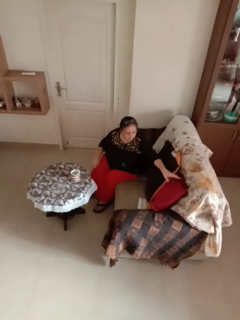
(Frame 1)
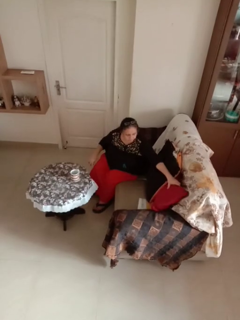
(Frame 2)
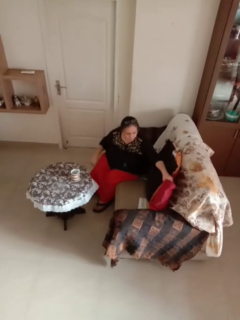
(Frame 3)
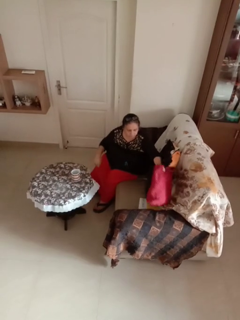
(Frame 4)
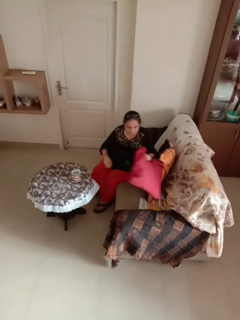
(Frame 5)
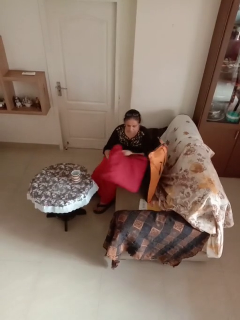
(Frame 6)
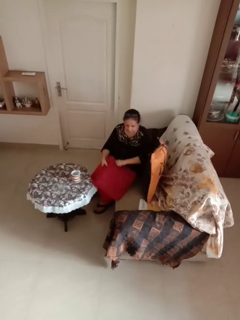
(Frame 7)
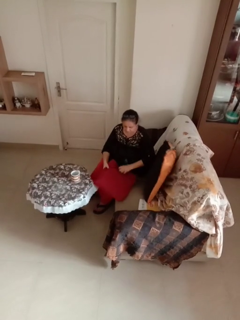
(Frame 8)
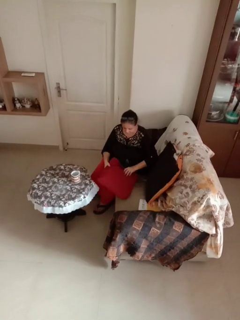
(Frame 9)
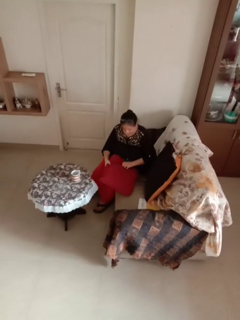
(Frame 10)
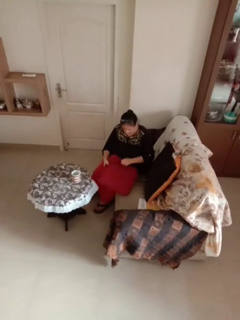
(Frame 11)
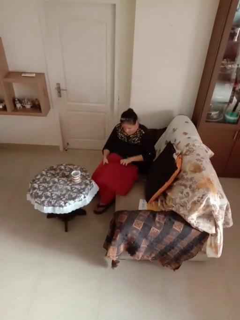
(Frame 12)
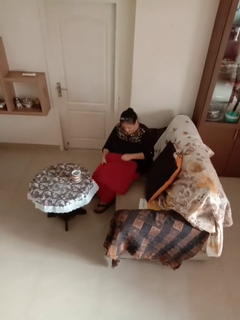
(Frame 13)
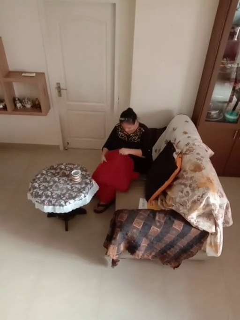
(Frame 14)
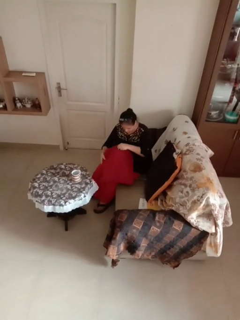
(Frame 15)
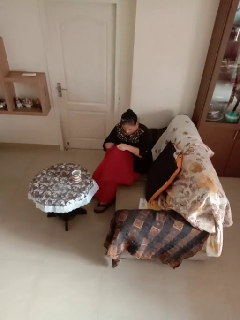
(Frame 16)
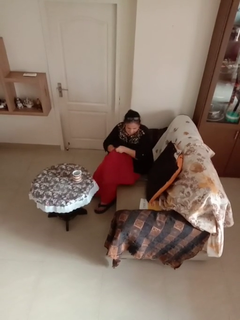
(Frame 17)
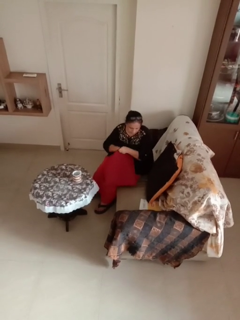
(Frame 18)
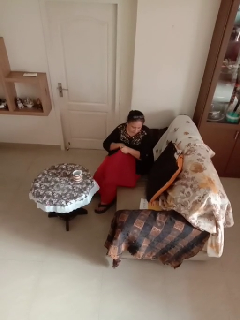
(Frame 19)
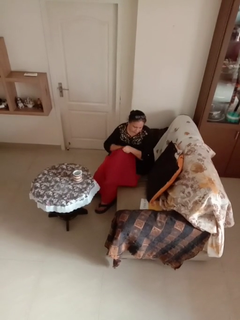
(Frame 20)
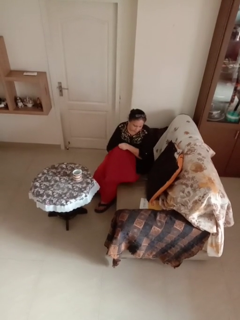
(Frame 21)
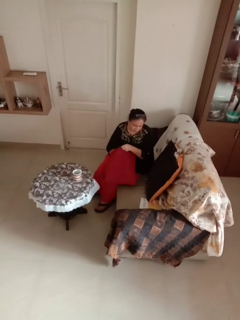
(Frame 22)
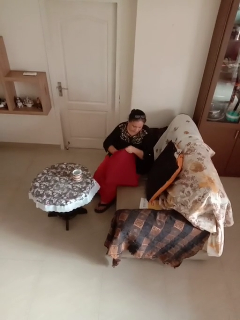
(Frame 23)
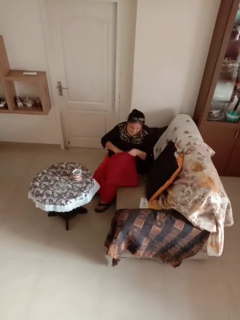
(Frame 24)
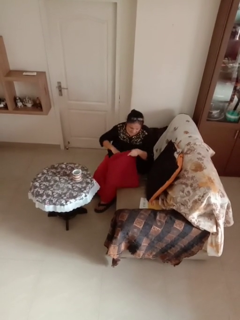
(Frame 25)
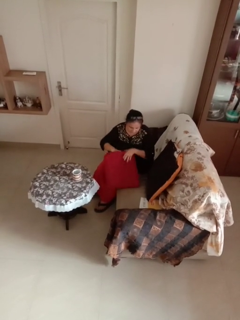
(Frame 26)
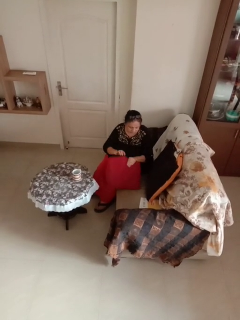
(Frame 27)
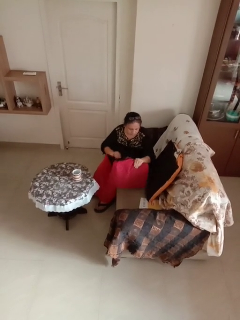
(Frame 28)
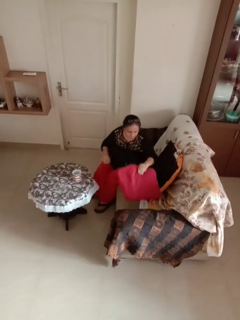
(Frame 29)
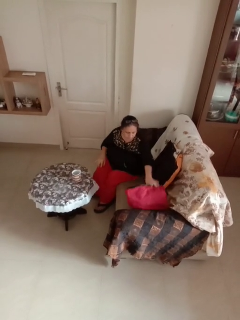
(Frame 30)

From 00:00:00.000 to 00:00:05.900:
person searches in couch

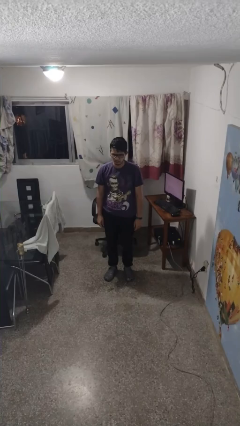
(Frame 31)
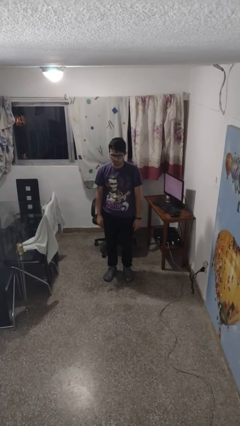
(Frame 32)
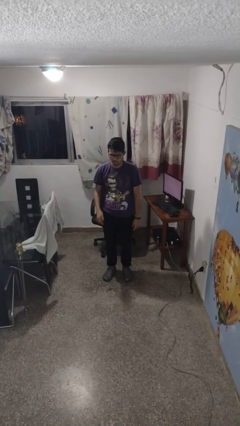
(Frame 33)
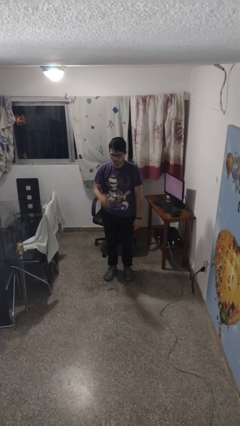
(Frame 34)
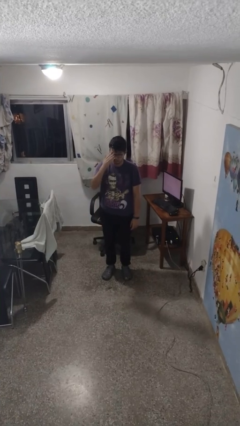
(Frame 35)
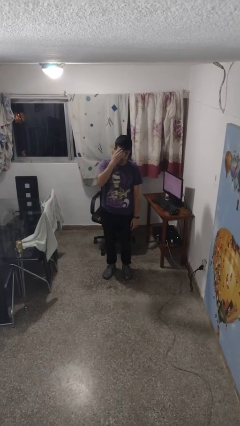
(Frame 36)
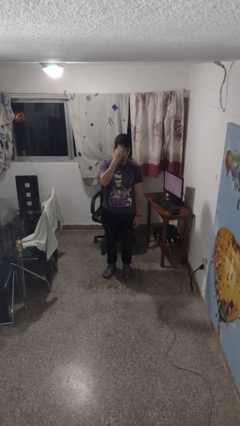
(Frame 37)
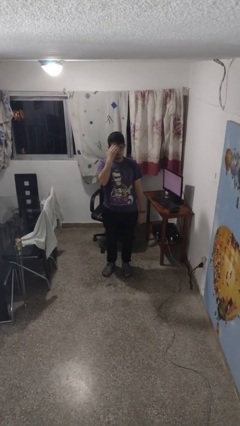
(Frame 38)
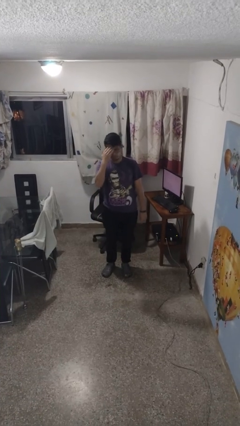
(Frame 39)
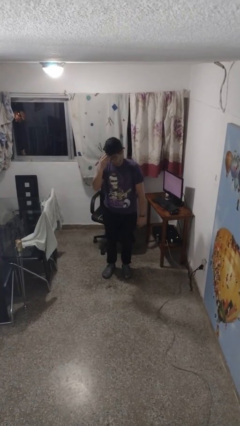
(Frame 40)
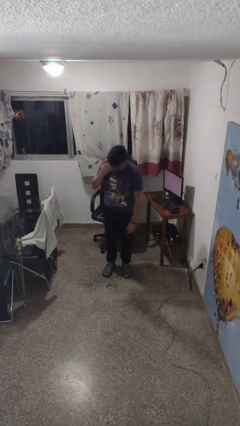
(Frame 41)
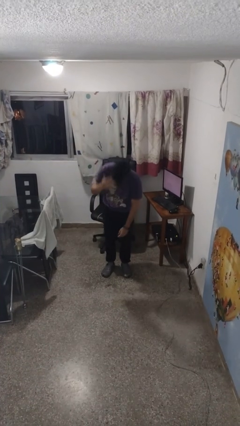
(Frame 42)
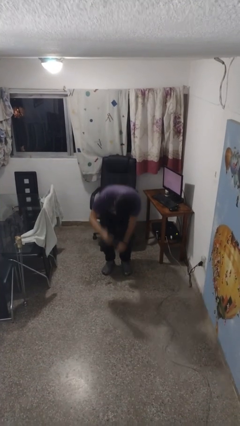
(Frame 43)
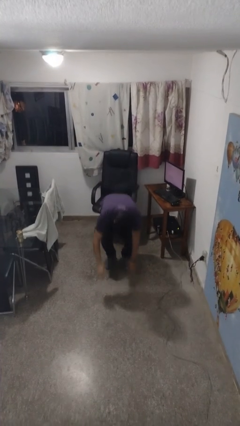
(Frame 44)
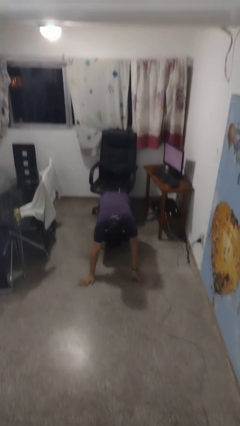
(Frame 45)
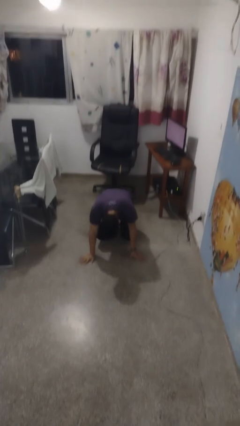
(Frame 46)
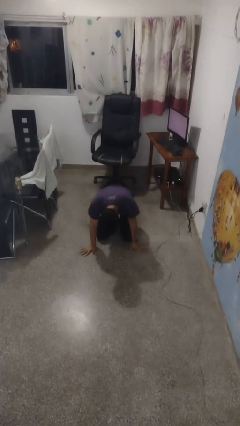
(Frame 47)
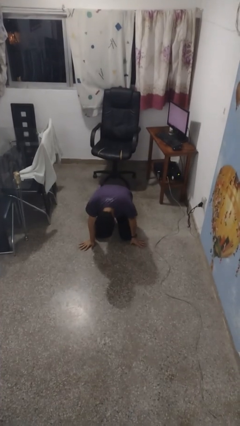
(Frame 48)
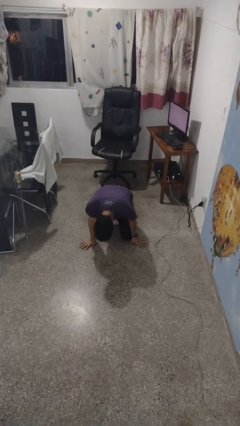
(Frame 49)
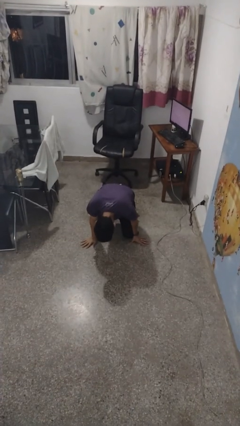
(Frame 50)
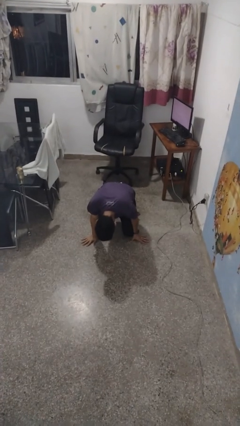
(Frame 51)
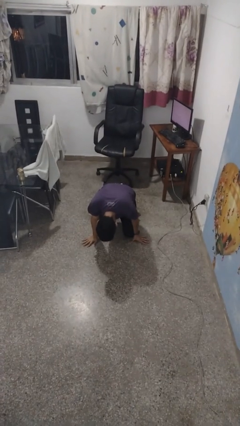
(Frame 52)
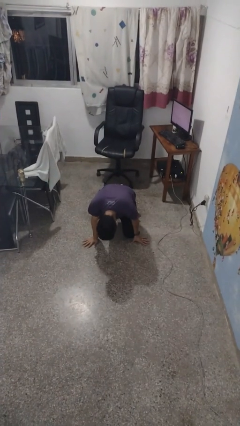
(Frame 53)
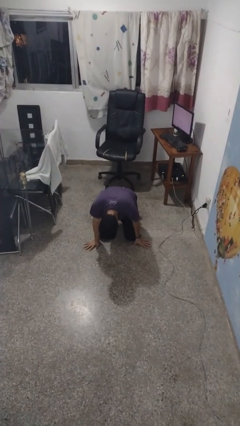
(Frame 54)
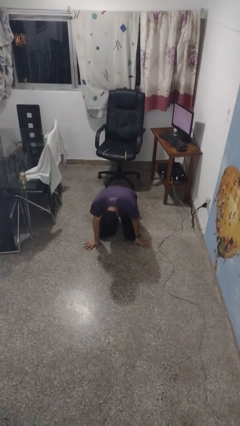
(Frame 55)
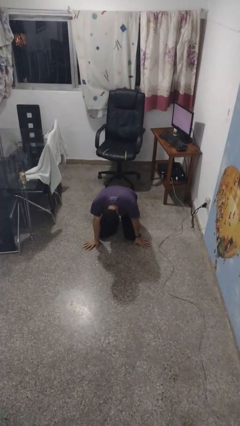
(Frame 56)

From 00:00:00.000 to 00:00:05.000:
person falls while standing

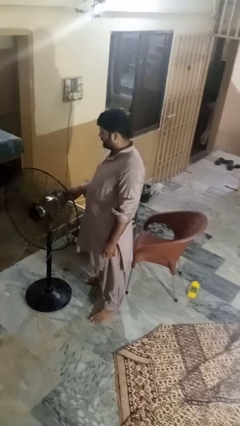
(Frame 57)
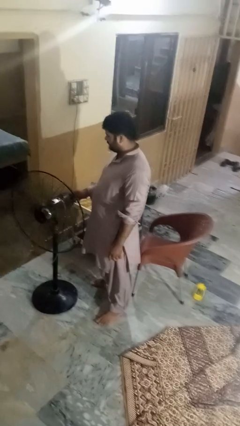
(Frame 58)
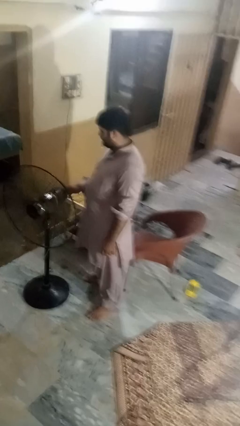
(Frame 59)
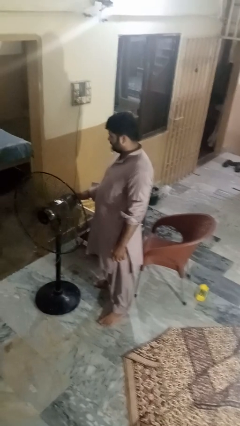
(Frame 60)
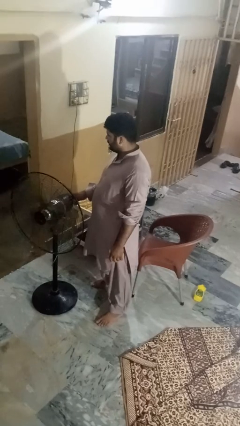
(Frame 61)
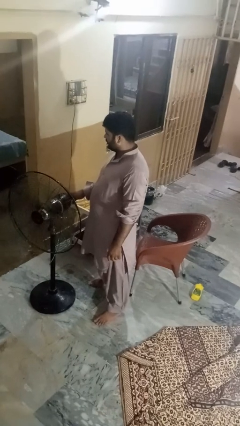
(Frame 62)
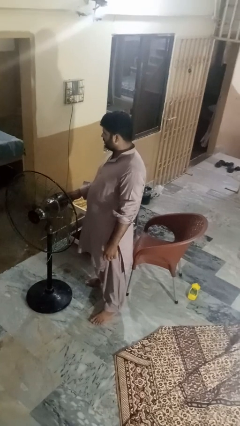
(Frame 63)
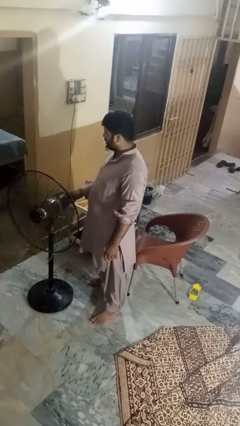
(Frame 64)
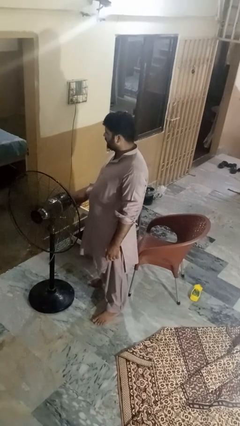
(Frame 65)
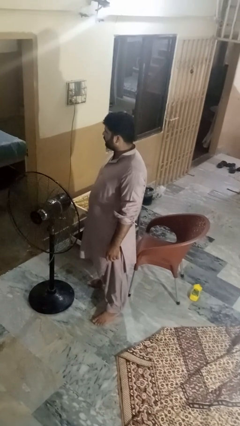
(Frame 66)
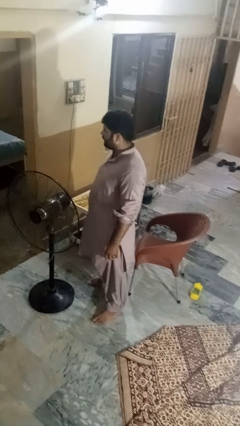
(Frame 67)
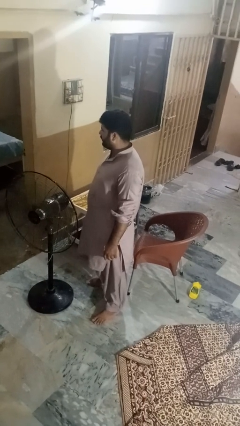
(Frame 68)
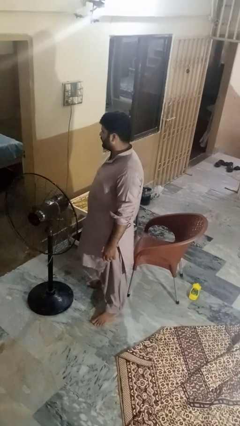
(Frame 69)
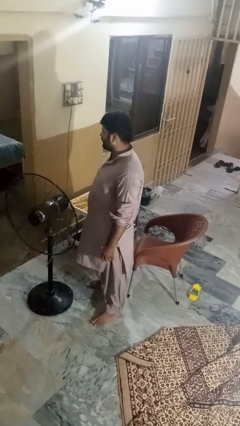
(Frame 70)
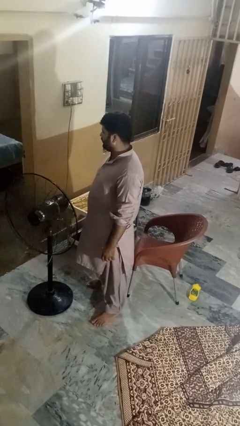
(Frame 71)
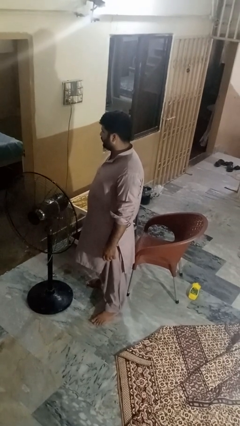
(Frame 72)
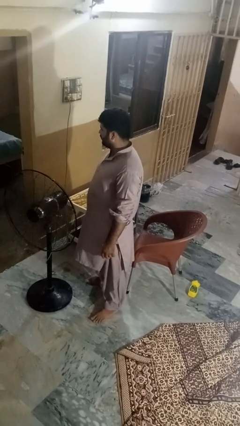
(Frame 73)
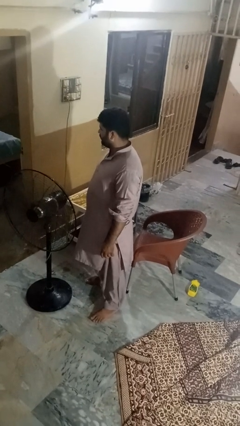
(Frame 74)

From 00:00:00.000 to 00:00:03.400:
person turns on fan

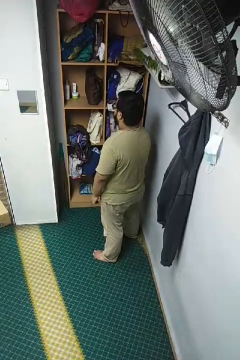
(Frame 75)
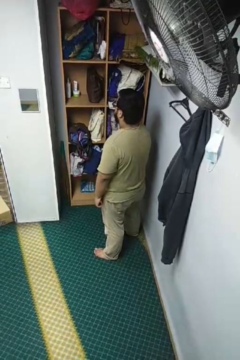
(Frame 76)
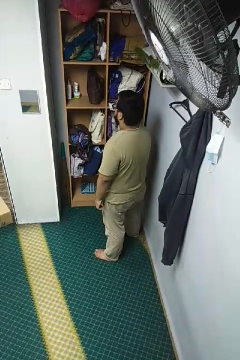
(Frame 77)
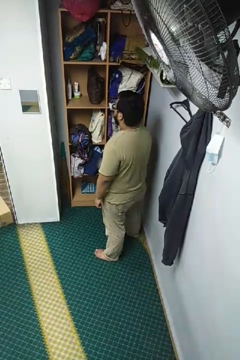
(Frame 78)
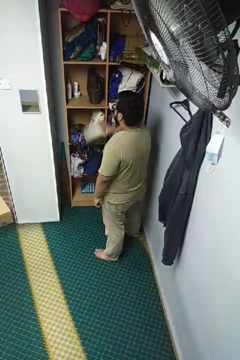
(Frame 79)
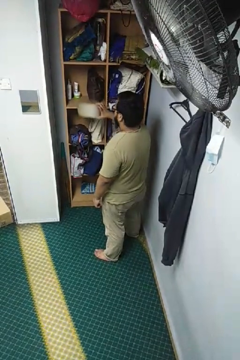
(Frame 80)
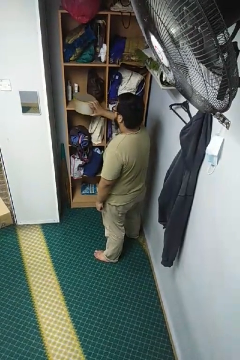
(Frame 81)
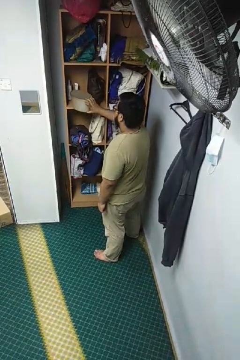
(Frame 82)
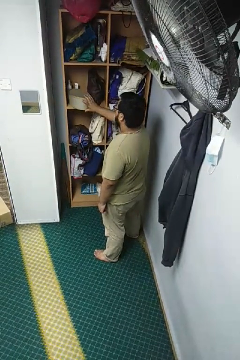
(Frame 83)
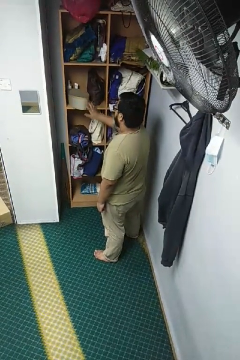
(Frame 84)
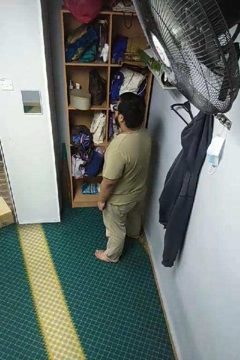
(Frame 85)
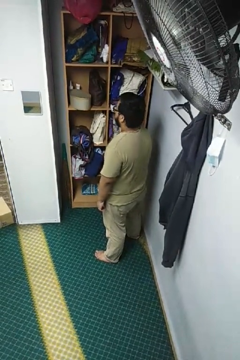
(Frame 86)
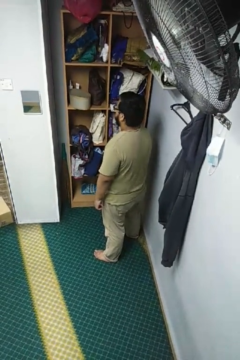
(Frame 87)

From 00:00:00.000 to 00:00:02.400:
person puts down object into cabinet

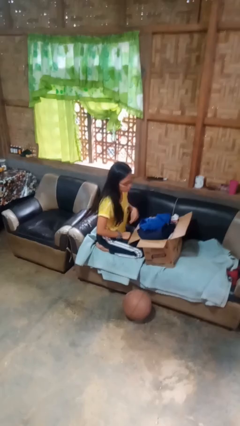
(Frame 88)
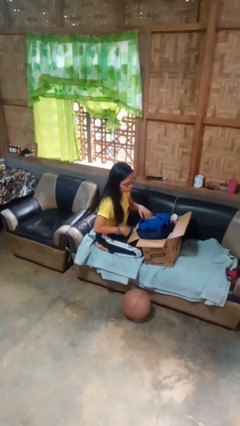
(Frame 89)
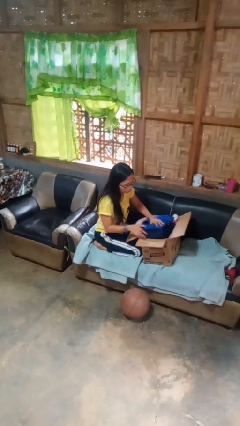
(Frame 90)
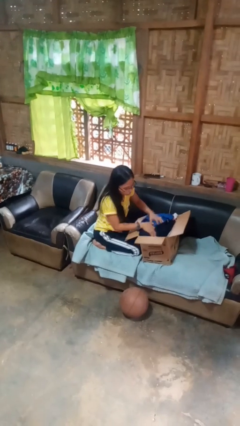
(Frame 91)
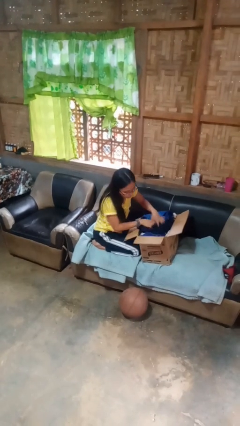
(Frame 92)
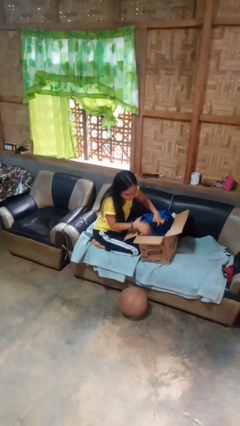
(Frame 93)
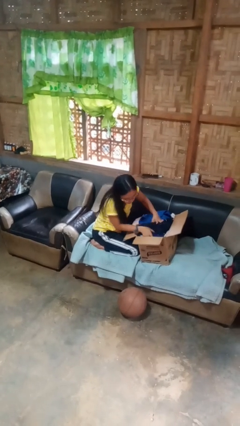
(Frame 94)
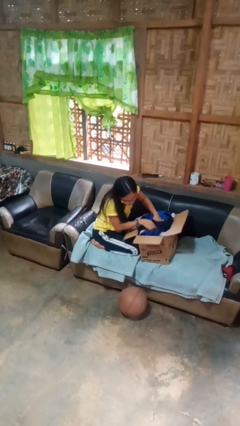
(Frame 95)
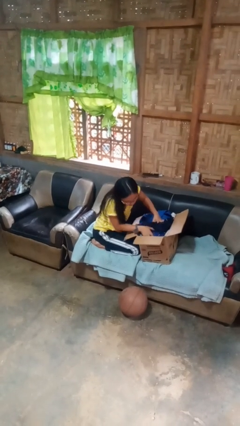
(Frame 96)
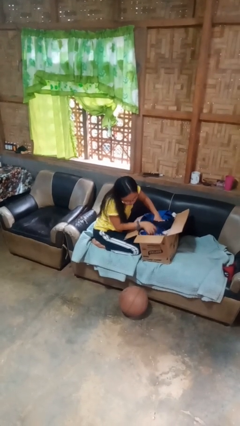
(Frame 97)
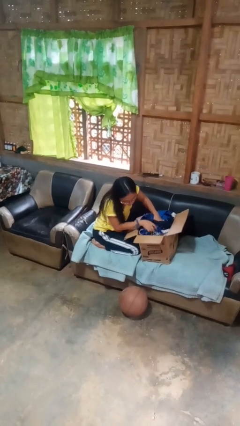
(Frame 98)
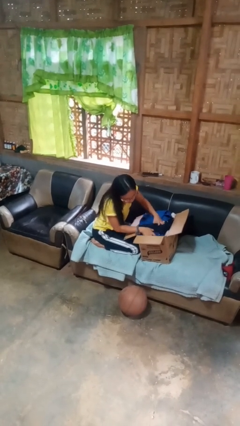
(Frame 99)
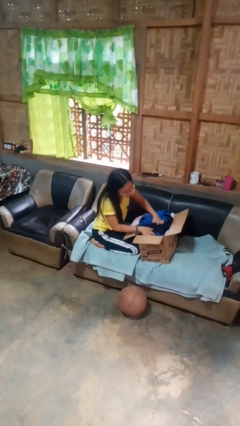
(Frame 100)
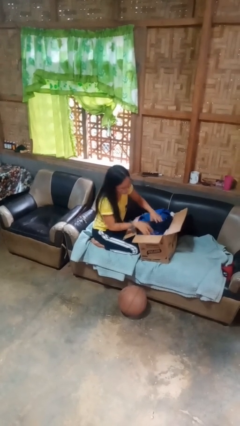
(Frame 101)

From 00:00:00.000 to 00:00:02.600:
person searches in box
